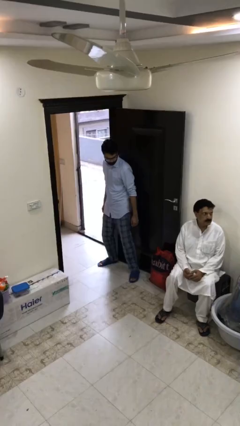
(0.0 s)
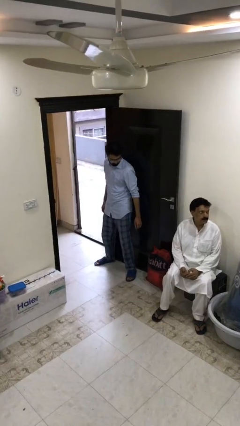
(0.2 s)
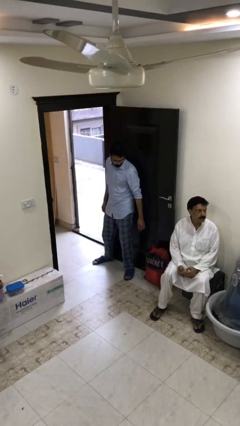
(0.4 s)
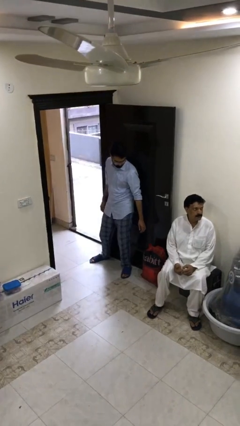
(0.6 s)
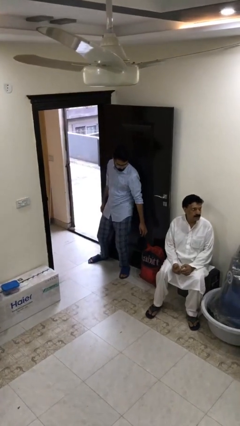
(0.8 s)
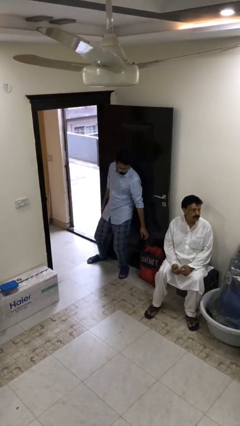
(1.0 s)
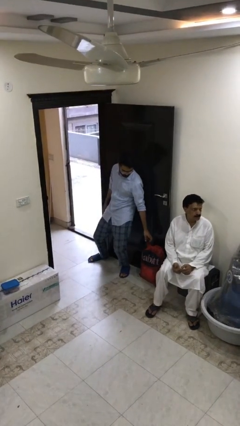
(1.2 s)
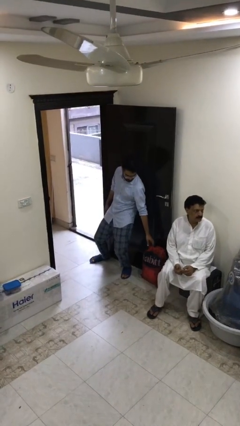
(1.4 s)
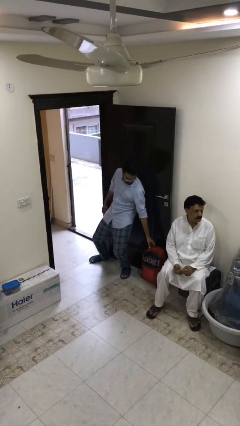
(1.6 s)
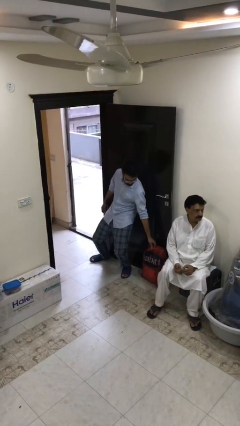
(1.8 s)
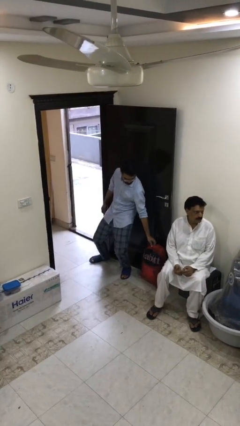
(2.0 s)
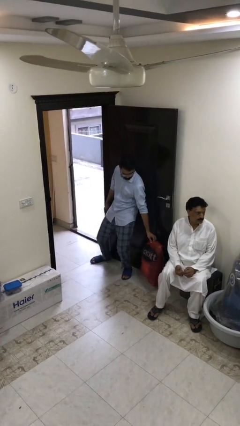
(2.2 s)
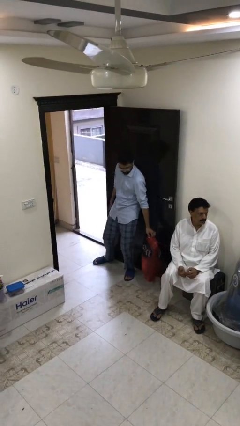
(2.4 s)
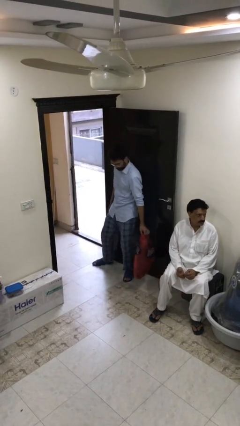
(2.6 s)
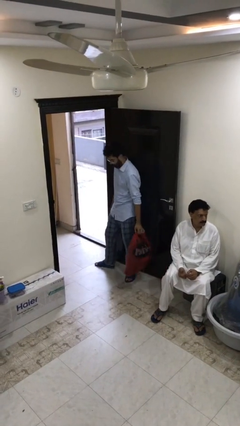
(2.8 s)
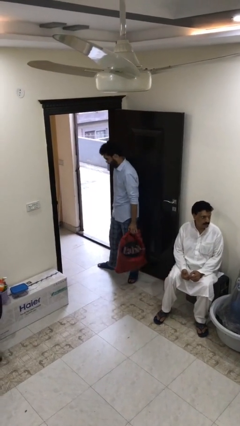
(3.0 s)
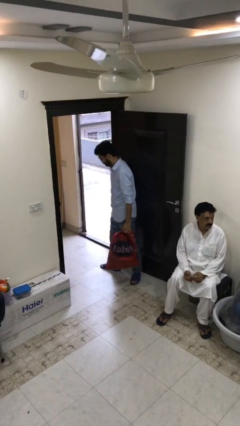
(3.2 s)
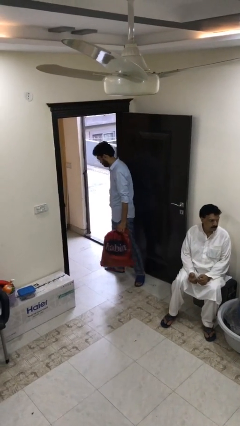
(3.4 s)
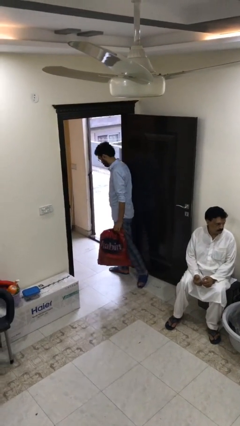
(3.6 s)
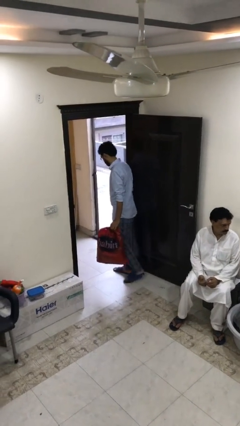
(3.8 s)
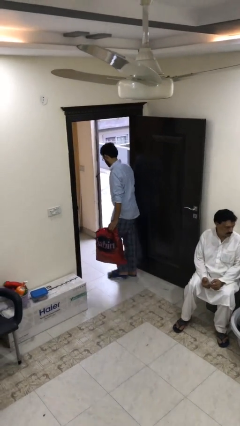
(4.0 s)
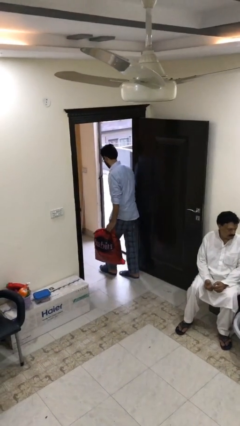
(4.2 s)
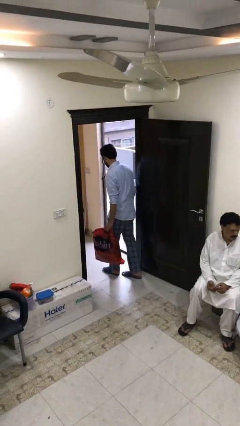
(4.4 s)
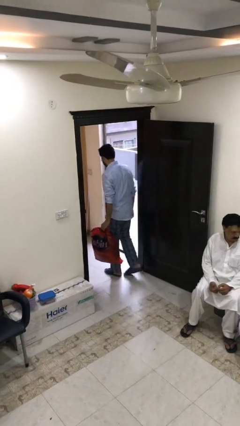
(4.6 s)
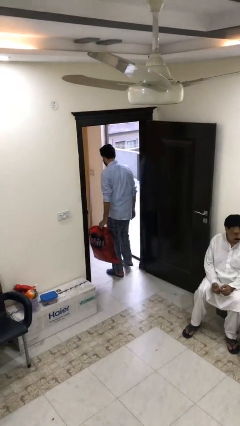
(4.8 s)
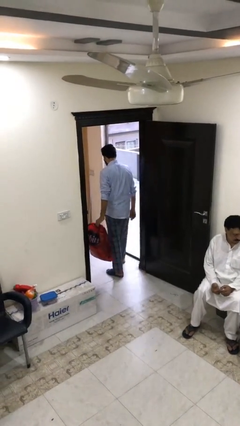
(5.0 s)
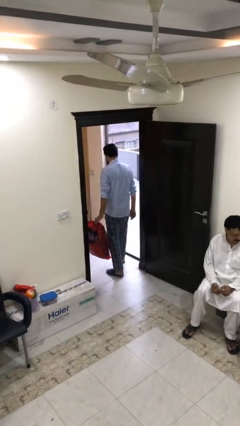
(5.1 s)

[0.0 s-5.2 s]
person steals object from person

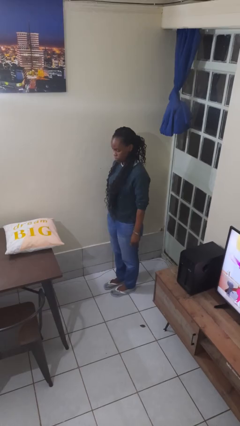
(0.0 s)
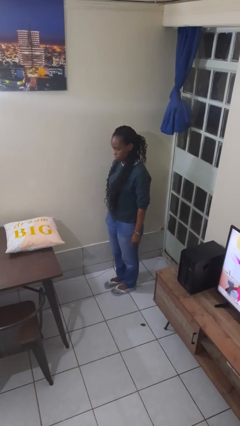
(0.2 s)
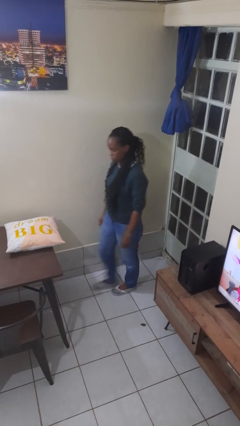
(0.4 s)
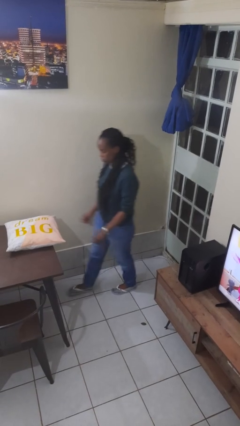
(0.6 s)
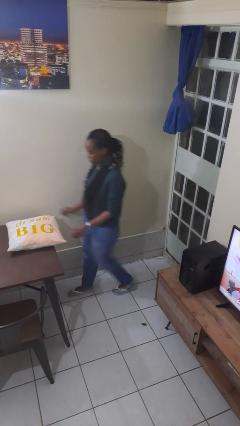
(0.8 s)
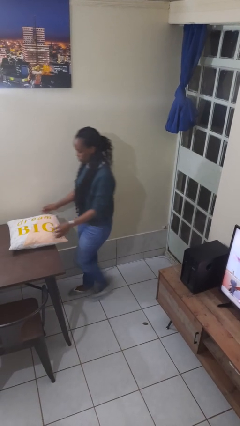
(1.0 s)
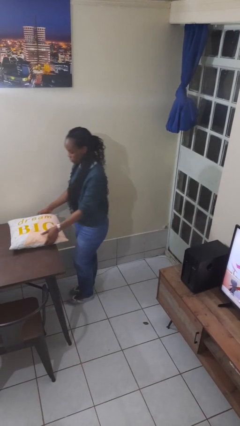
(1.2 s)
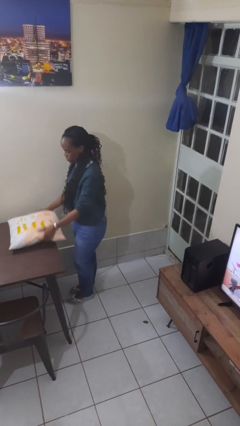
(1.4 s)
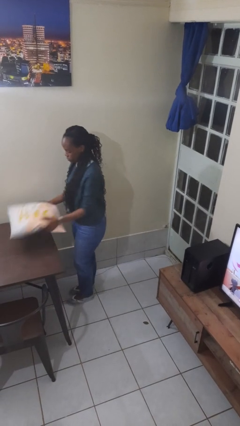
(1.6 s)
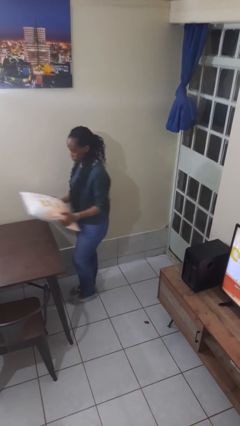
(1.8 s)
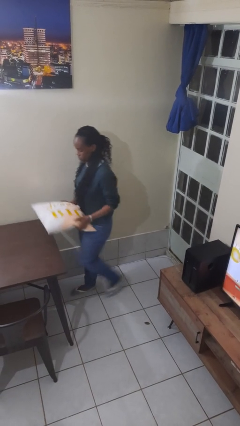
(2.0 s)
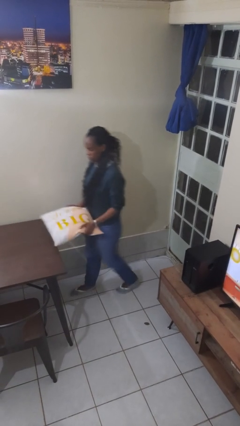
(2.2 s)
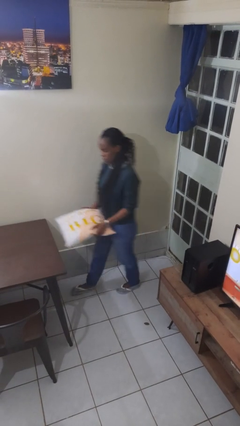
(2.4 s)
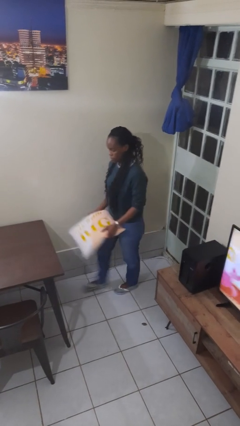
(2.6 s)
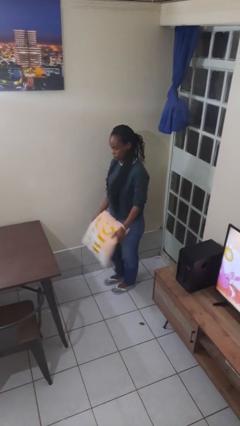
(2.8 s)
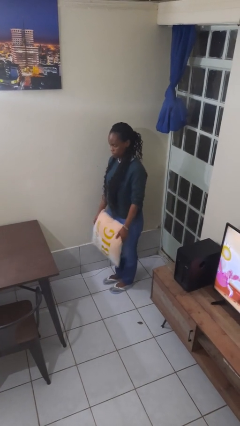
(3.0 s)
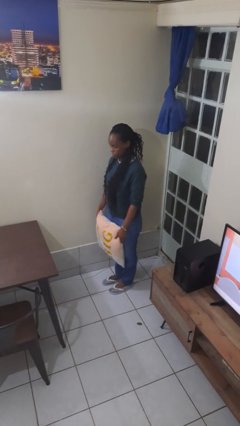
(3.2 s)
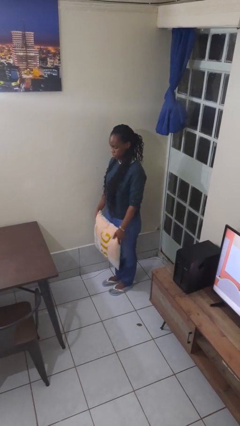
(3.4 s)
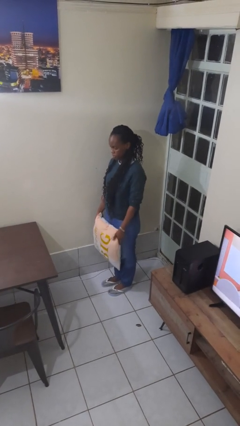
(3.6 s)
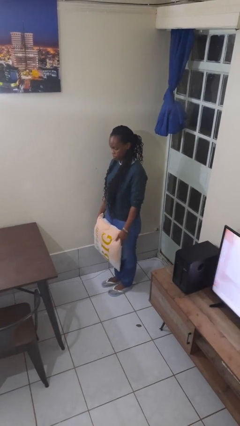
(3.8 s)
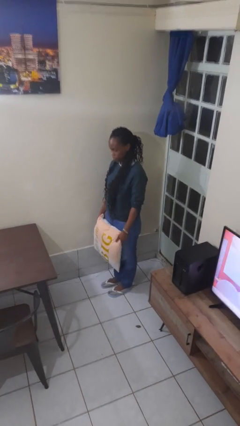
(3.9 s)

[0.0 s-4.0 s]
person picks up object from table

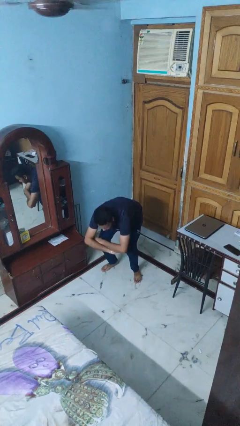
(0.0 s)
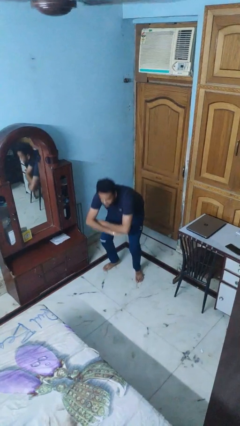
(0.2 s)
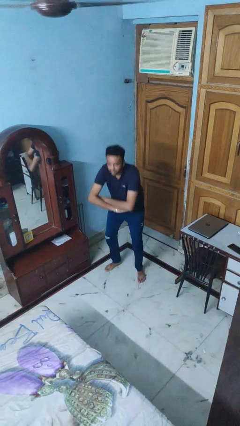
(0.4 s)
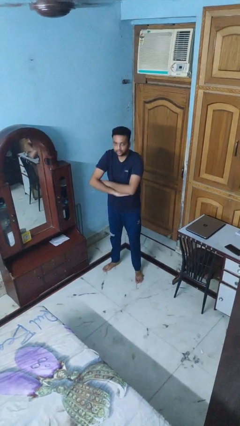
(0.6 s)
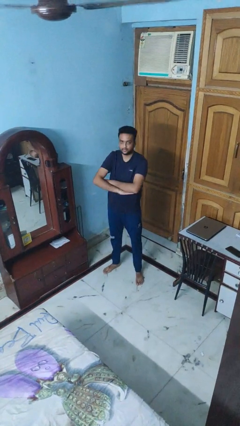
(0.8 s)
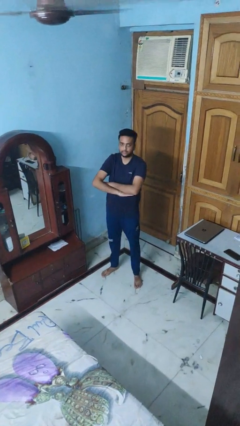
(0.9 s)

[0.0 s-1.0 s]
person stands up

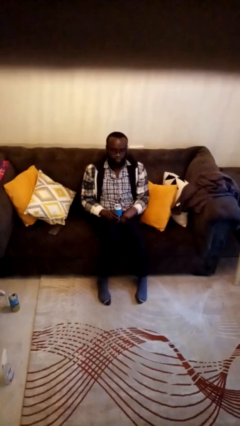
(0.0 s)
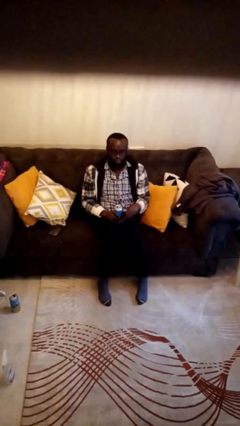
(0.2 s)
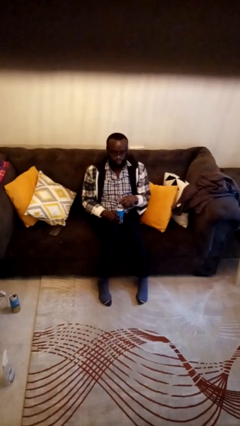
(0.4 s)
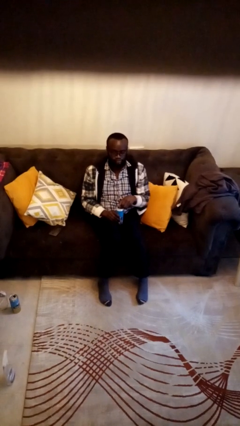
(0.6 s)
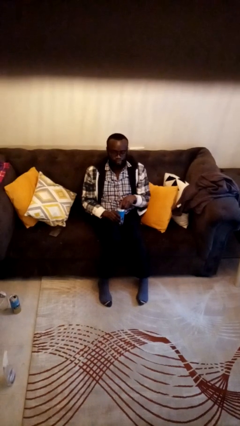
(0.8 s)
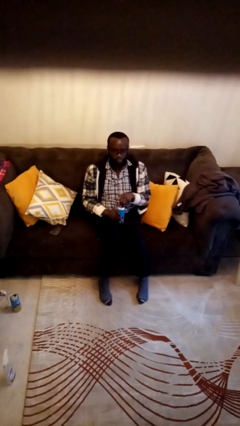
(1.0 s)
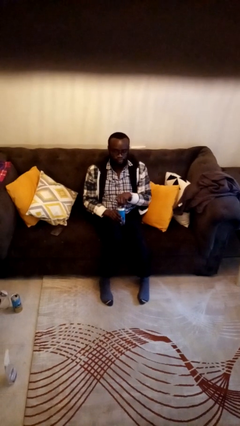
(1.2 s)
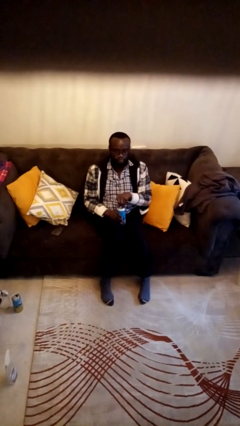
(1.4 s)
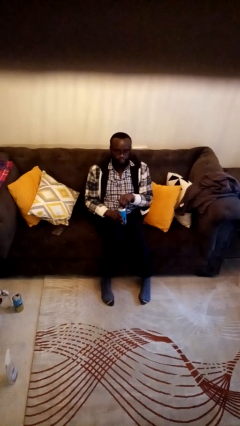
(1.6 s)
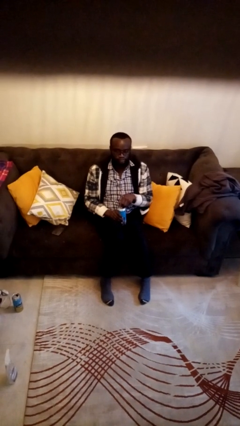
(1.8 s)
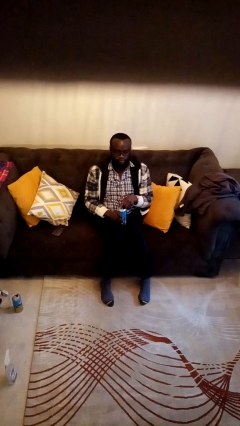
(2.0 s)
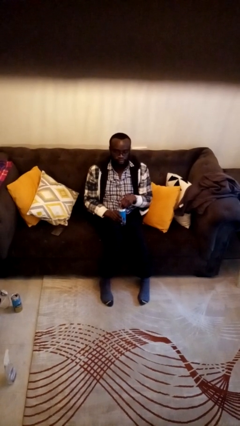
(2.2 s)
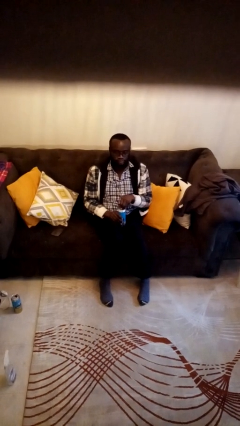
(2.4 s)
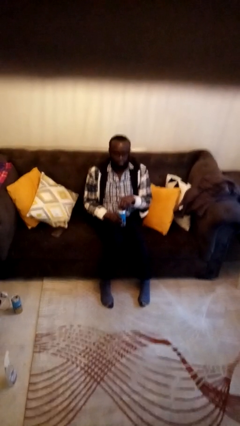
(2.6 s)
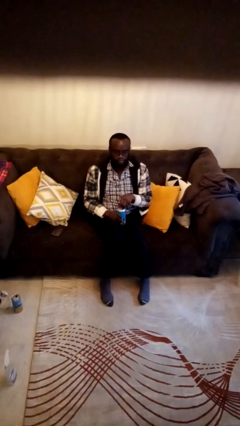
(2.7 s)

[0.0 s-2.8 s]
person opens beverage can

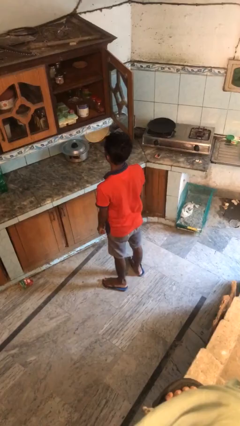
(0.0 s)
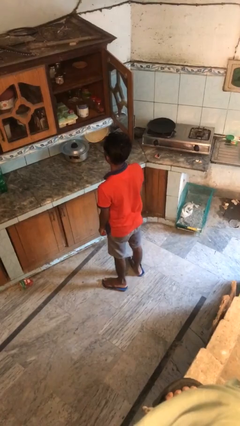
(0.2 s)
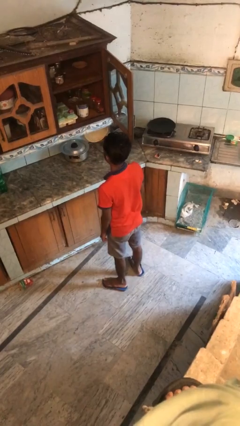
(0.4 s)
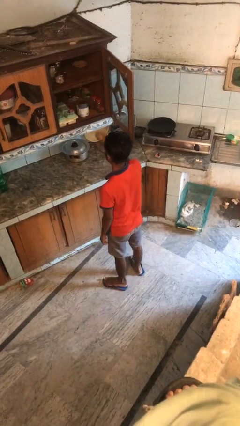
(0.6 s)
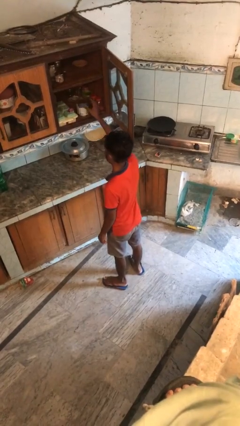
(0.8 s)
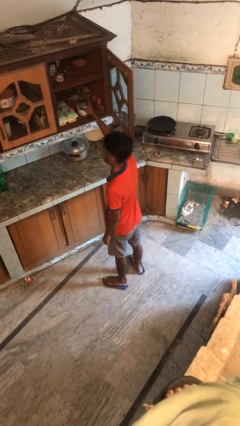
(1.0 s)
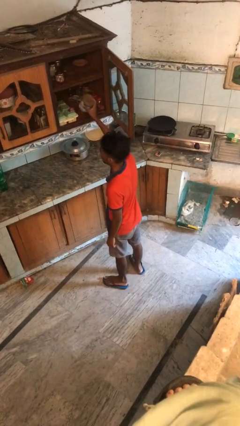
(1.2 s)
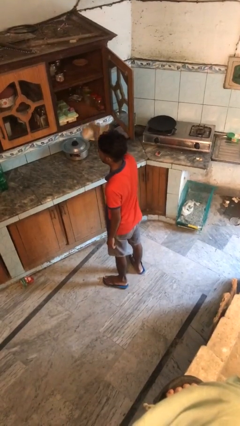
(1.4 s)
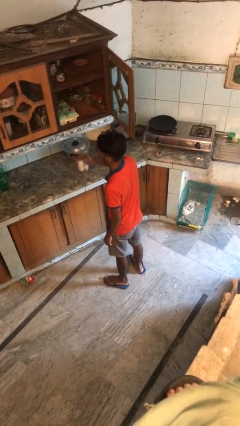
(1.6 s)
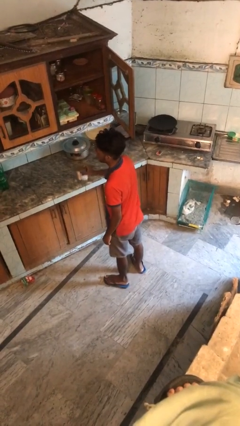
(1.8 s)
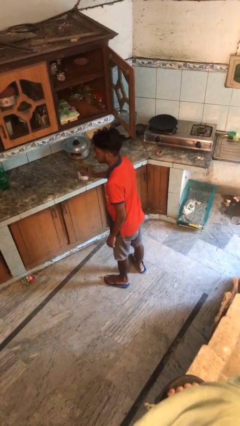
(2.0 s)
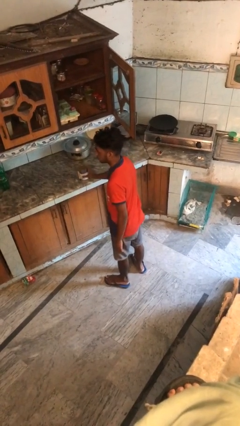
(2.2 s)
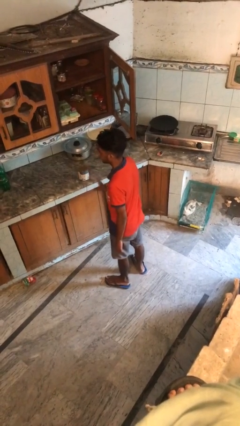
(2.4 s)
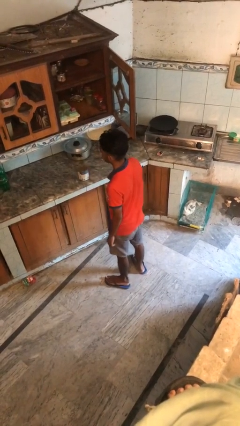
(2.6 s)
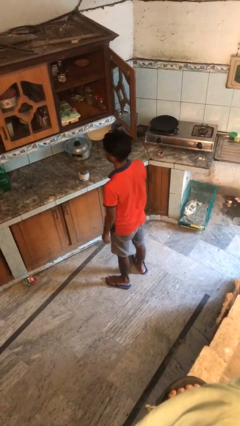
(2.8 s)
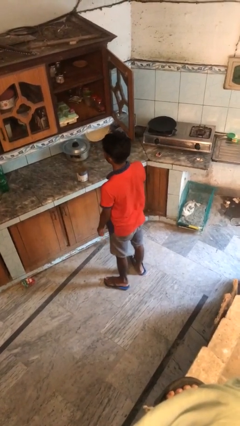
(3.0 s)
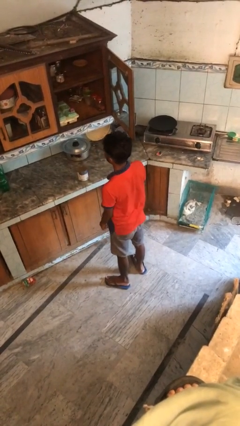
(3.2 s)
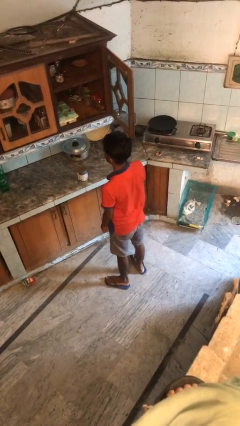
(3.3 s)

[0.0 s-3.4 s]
person takes object from cabinet

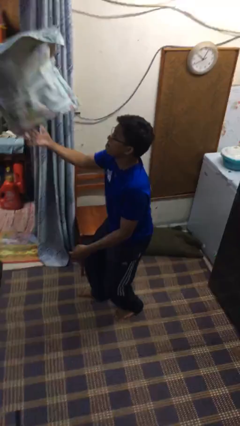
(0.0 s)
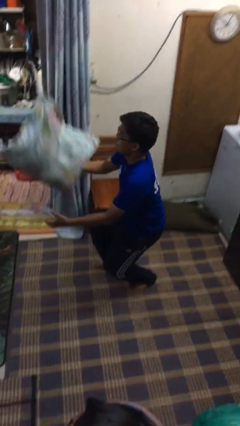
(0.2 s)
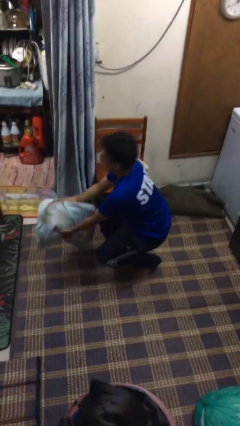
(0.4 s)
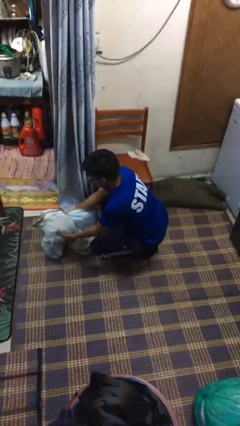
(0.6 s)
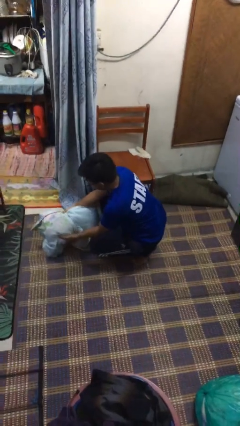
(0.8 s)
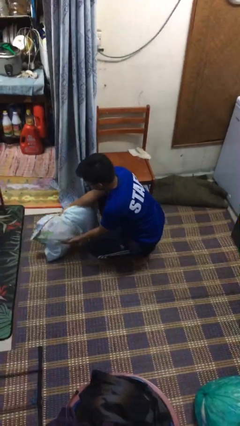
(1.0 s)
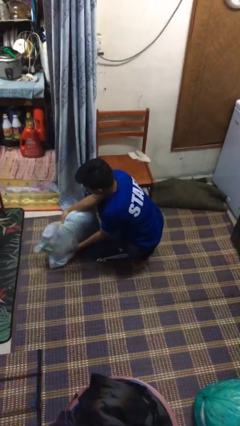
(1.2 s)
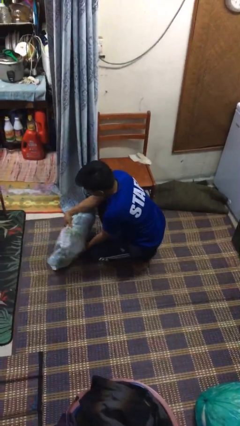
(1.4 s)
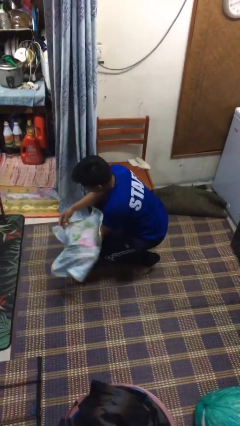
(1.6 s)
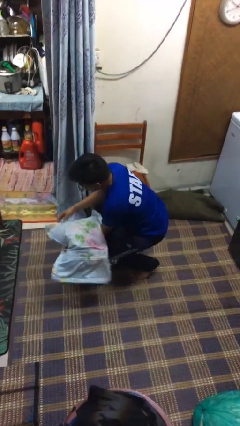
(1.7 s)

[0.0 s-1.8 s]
person catches dropped object
